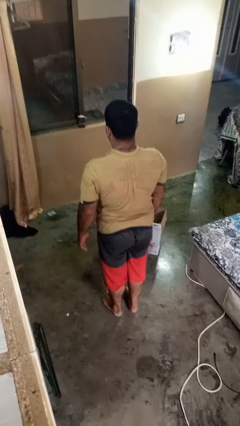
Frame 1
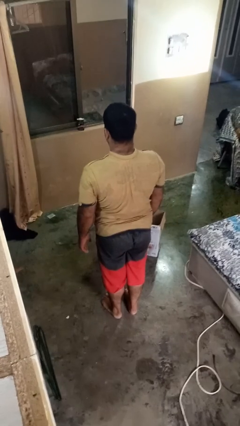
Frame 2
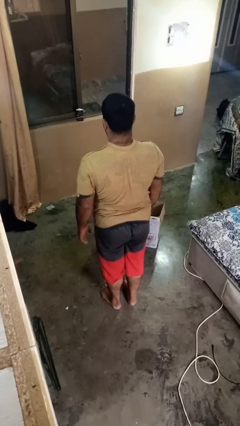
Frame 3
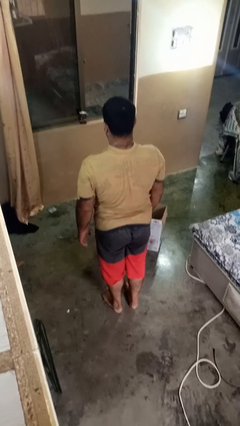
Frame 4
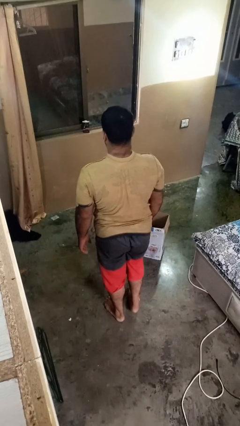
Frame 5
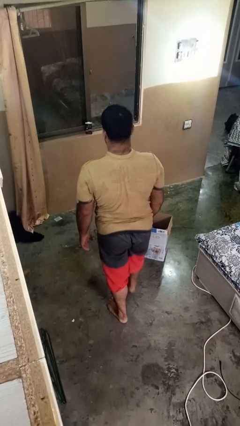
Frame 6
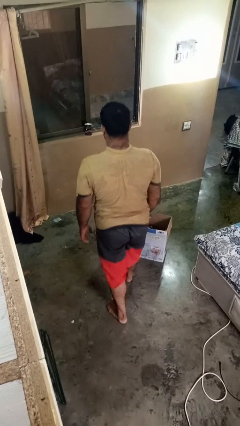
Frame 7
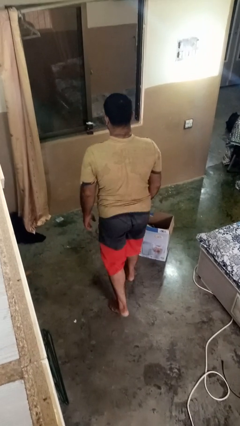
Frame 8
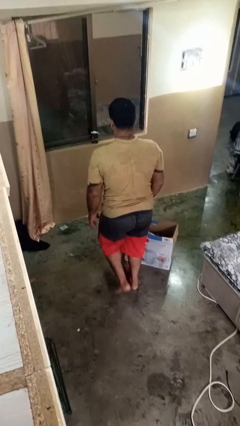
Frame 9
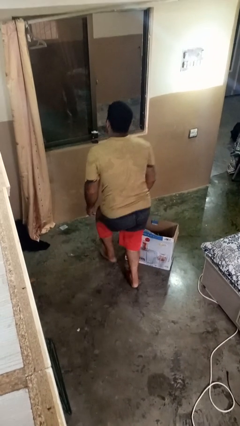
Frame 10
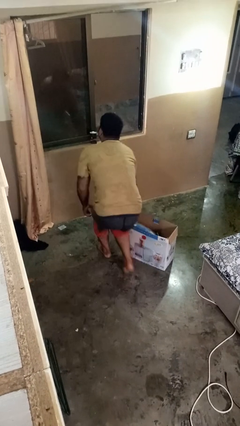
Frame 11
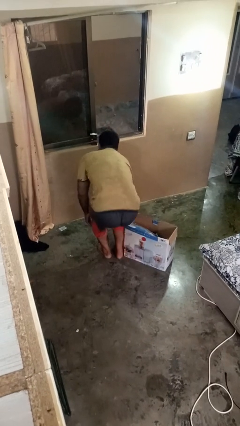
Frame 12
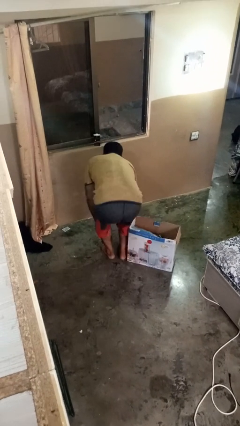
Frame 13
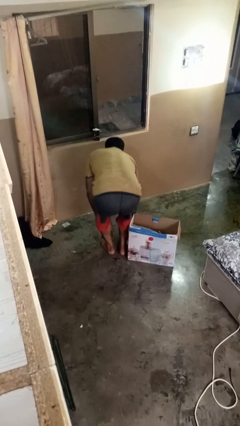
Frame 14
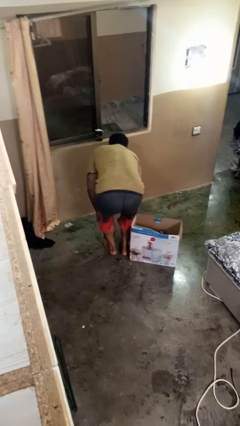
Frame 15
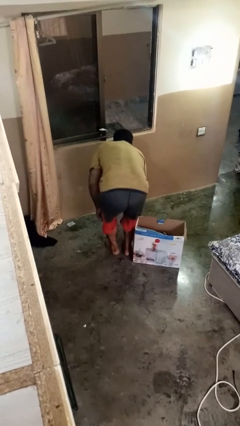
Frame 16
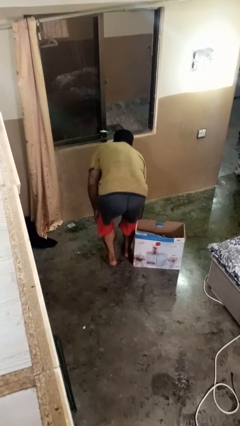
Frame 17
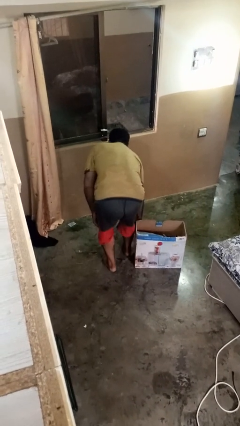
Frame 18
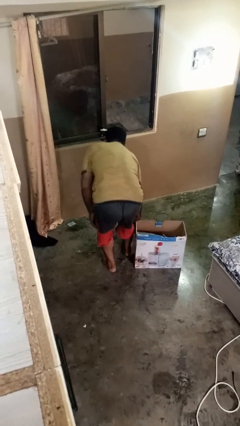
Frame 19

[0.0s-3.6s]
person trips on object on floor

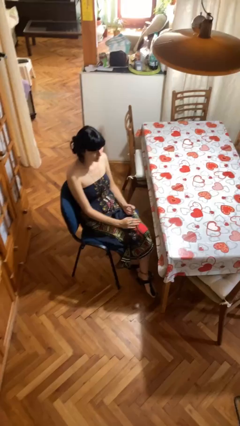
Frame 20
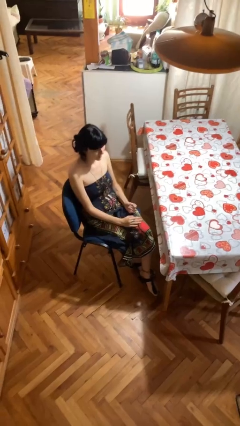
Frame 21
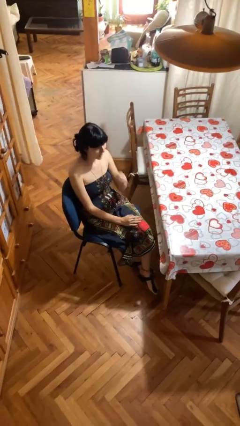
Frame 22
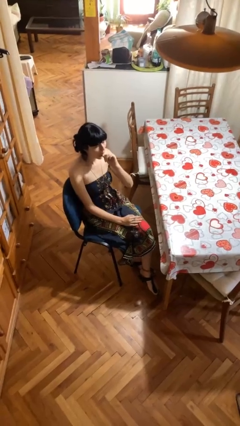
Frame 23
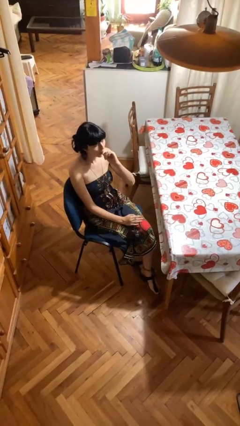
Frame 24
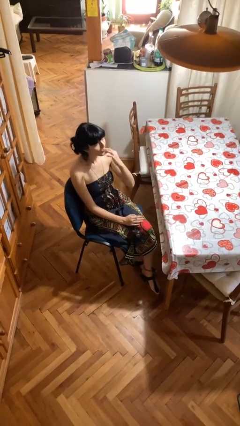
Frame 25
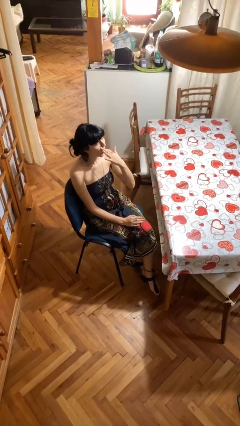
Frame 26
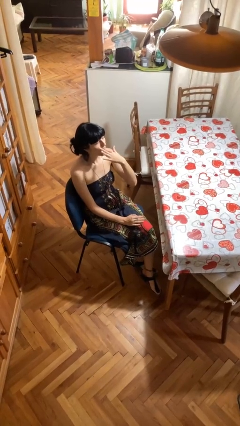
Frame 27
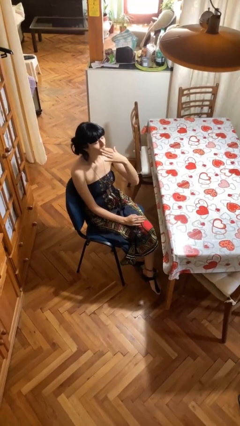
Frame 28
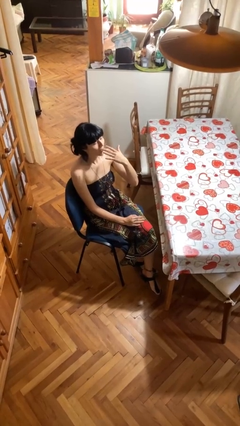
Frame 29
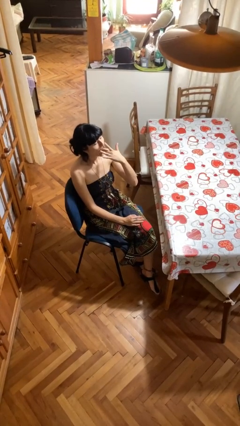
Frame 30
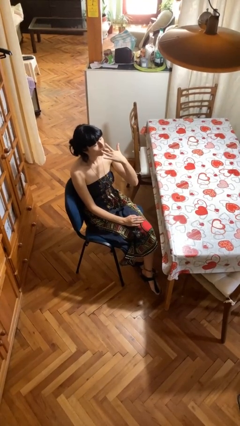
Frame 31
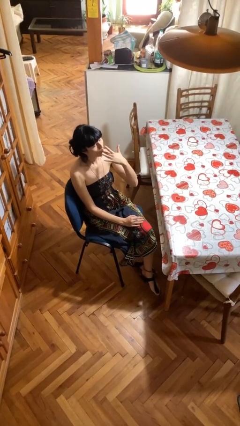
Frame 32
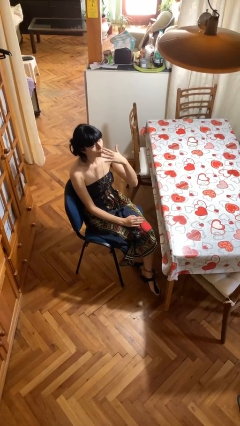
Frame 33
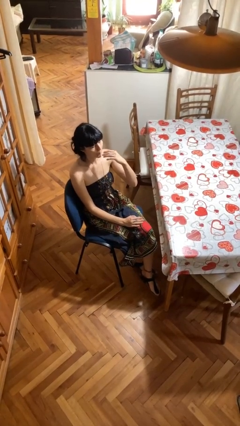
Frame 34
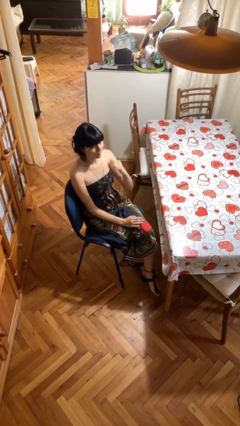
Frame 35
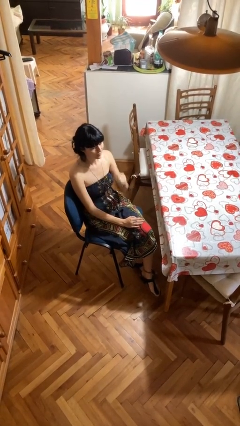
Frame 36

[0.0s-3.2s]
person licks fingers

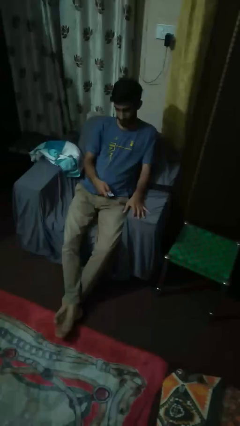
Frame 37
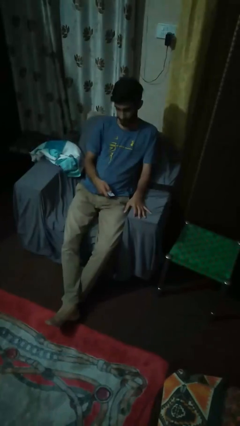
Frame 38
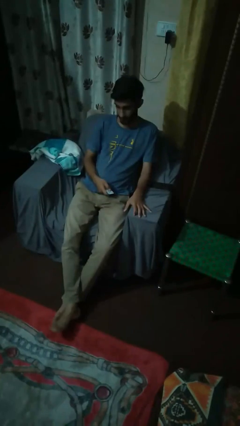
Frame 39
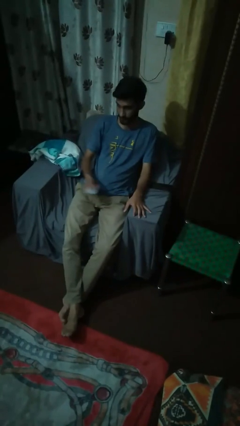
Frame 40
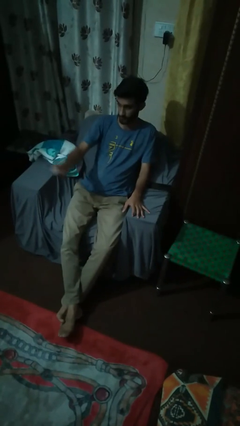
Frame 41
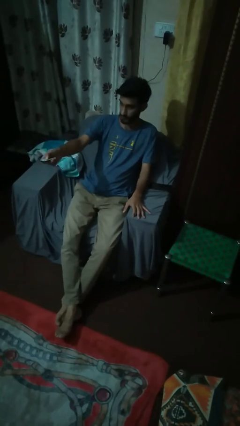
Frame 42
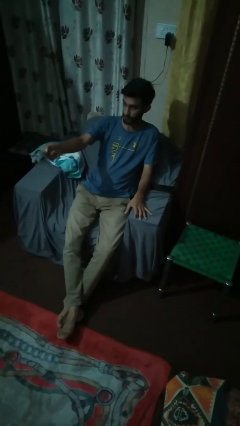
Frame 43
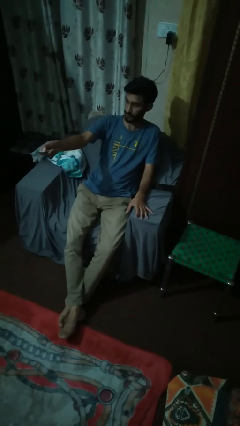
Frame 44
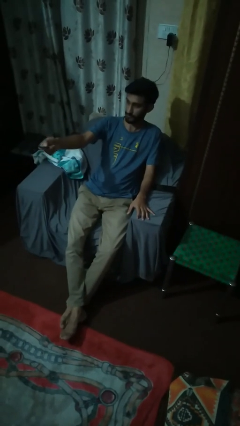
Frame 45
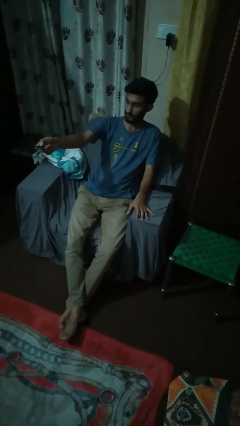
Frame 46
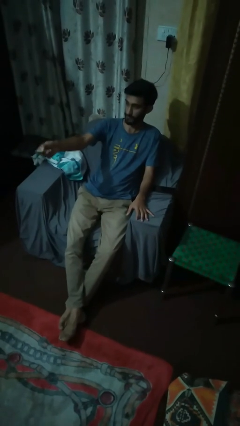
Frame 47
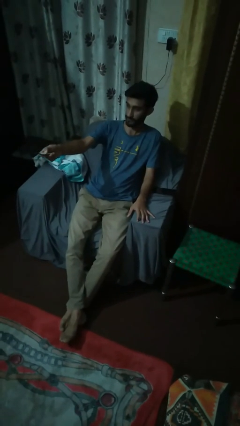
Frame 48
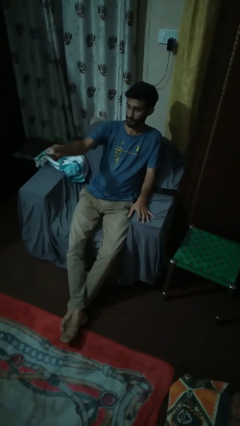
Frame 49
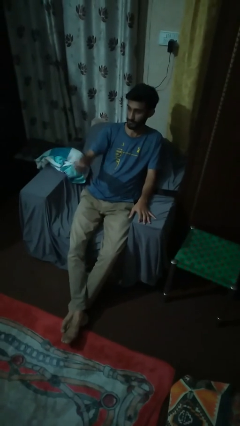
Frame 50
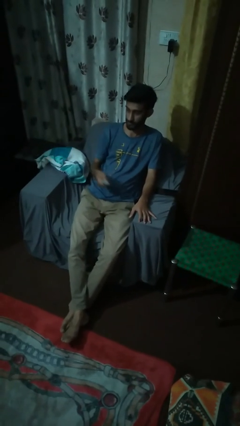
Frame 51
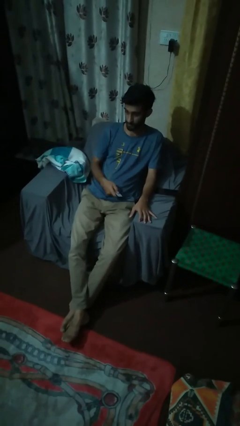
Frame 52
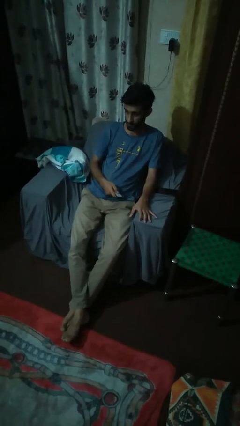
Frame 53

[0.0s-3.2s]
person uses television remote

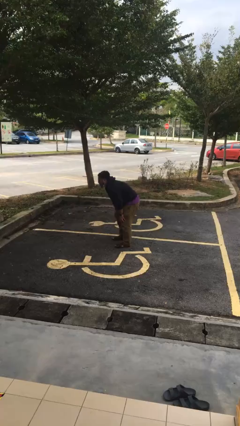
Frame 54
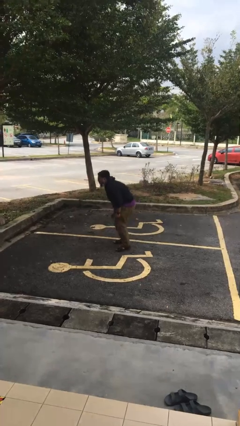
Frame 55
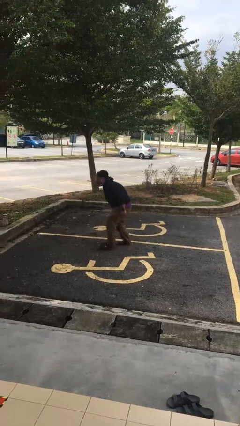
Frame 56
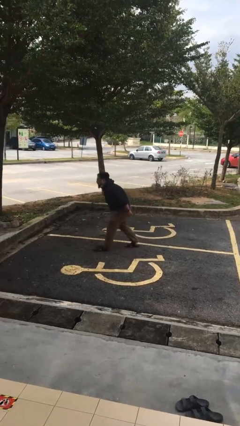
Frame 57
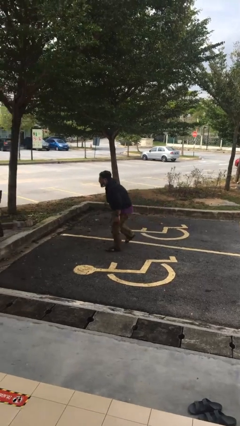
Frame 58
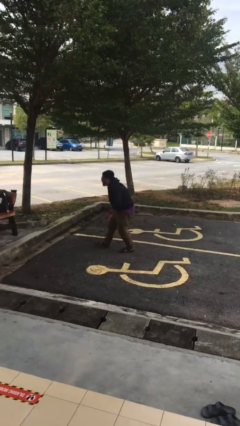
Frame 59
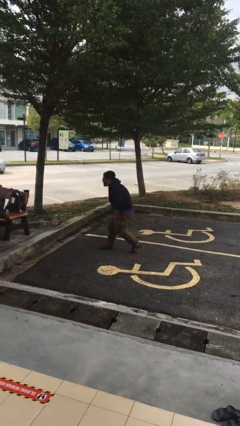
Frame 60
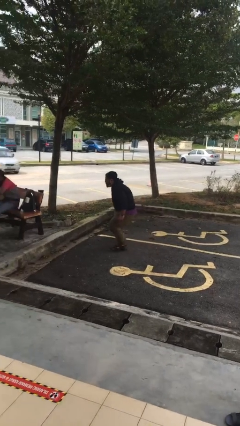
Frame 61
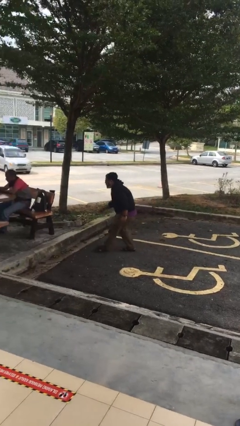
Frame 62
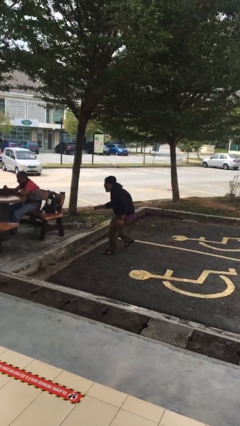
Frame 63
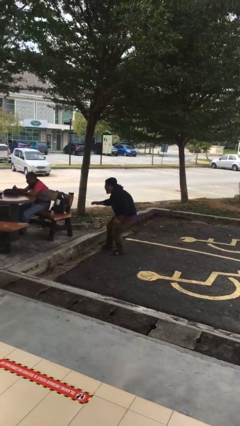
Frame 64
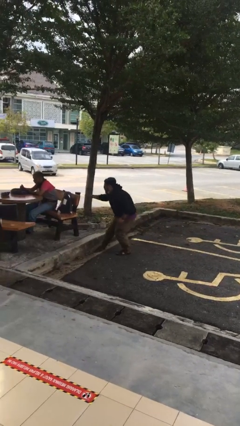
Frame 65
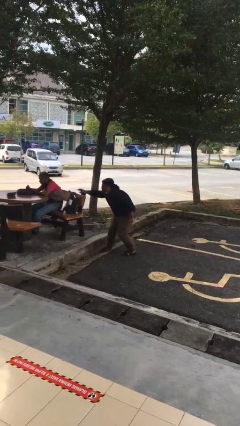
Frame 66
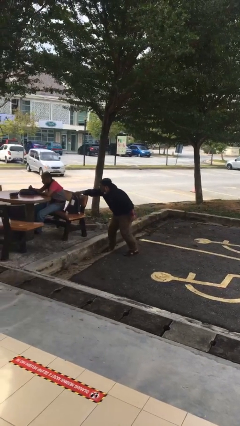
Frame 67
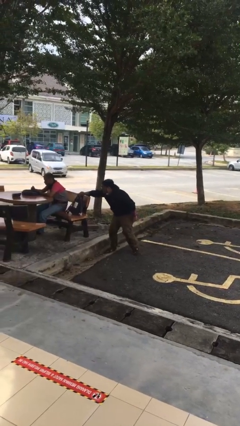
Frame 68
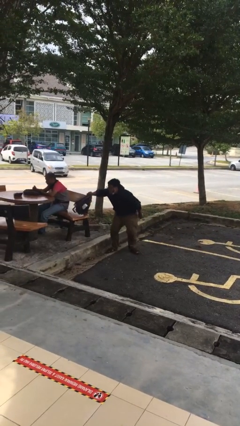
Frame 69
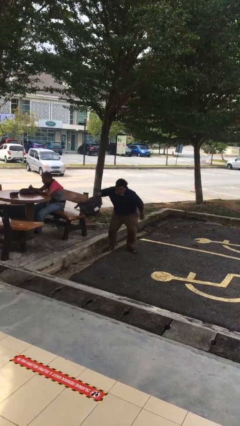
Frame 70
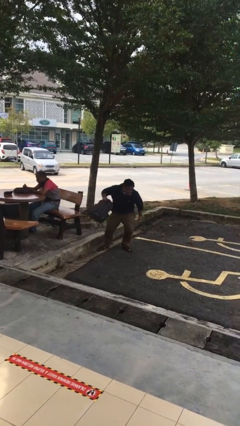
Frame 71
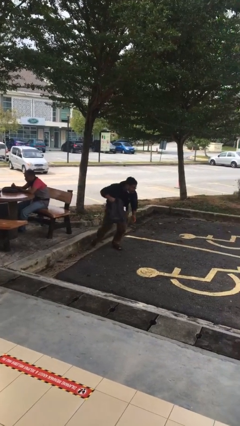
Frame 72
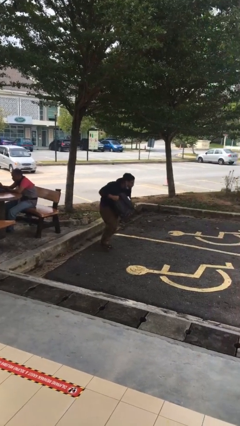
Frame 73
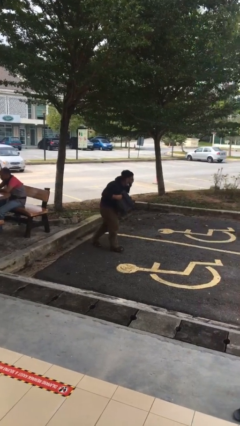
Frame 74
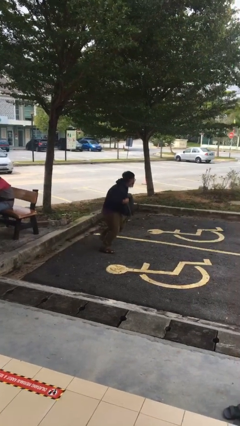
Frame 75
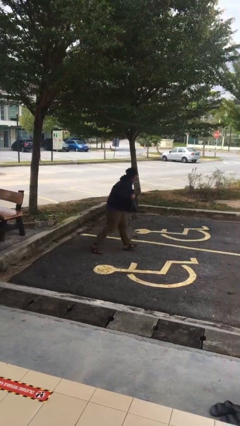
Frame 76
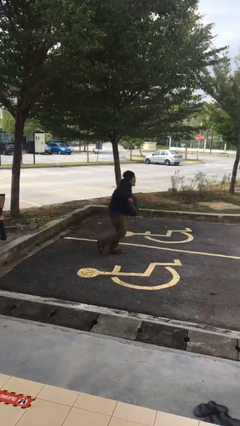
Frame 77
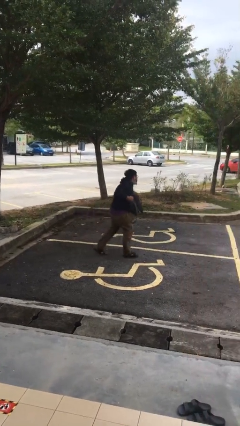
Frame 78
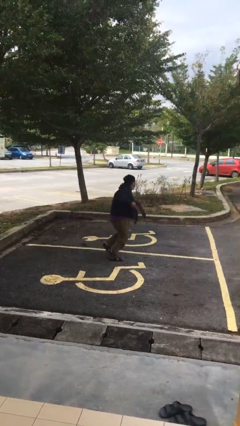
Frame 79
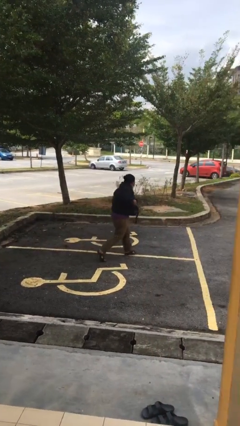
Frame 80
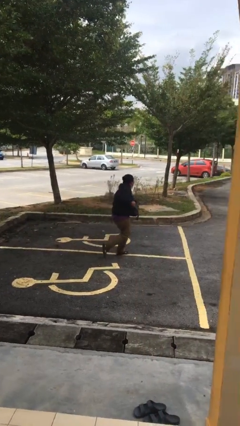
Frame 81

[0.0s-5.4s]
person steals object from person

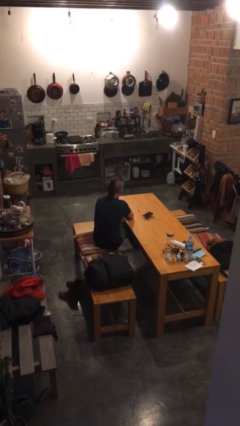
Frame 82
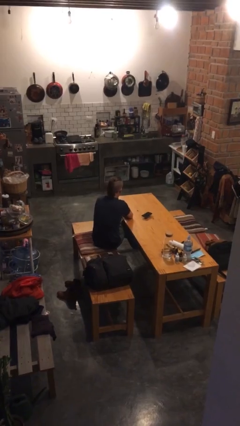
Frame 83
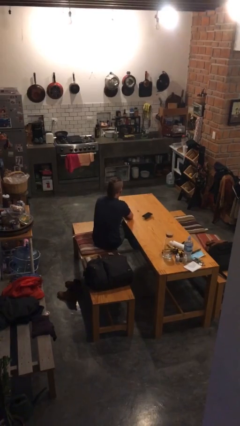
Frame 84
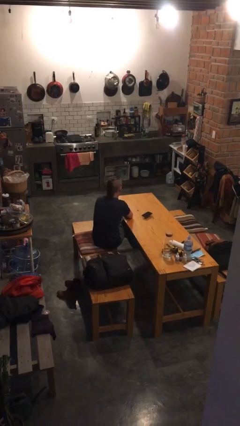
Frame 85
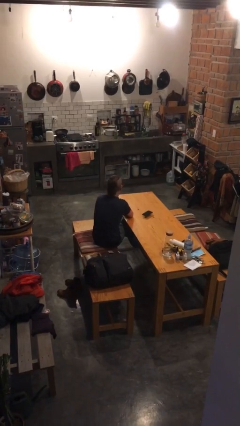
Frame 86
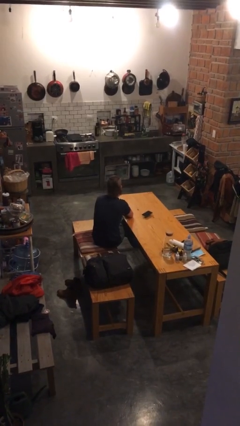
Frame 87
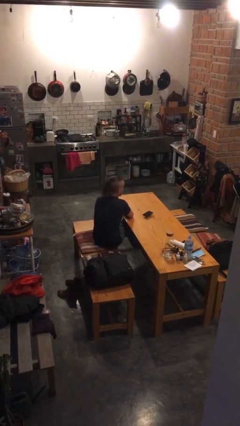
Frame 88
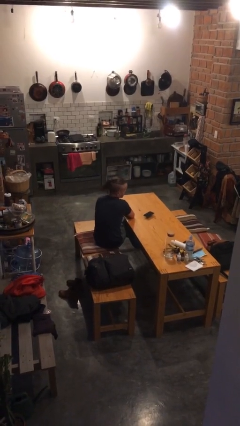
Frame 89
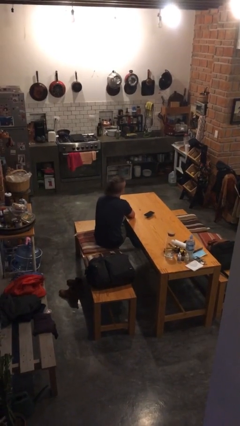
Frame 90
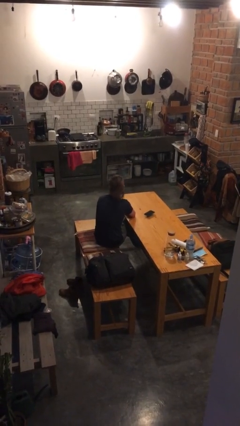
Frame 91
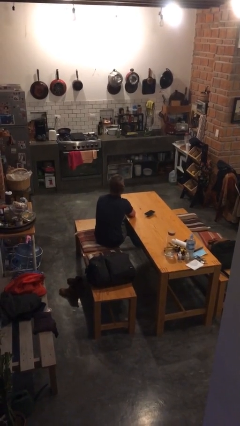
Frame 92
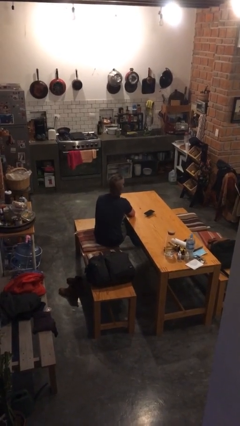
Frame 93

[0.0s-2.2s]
person shakes head
